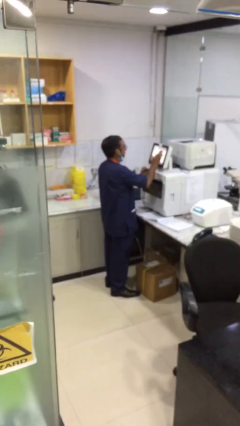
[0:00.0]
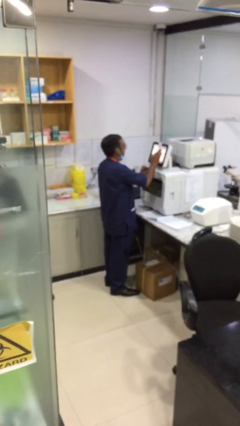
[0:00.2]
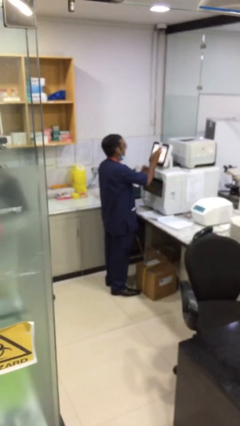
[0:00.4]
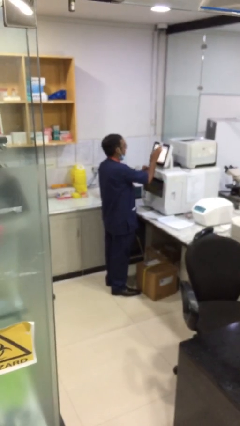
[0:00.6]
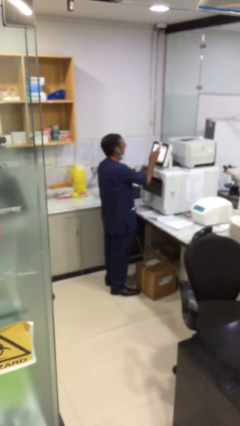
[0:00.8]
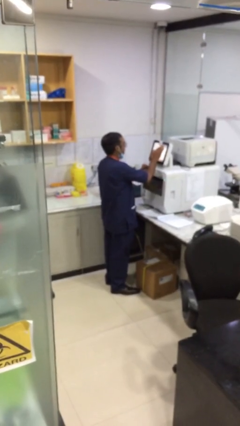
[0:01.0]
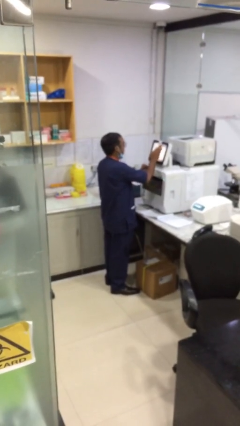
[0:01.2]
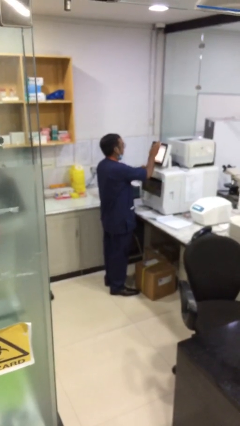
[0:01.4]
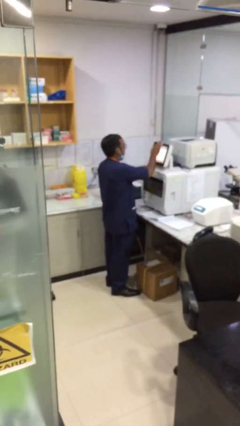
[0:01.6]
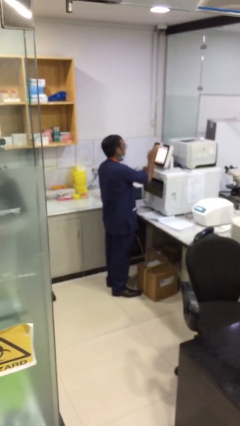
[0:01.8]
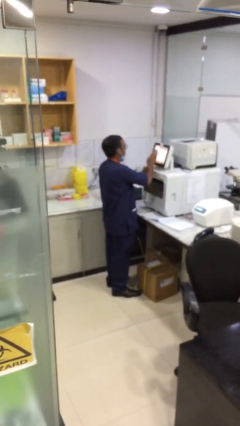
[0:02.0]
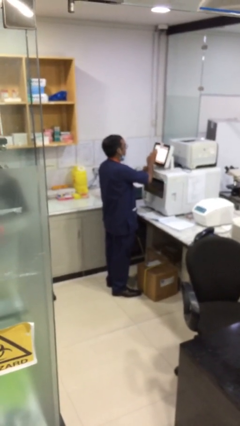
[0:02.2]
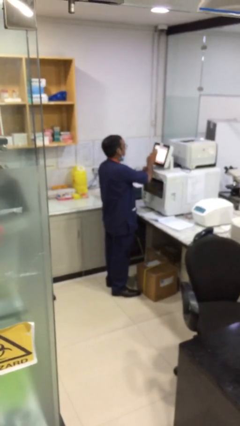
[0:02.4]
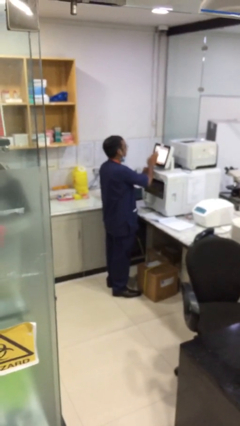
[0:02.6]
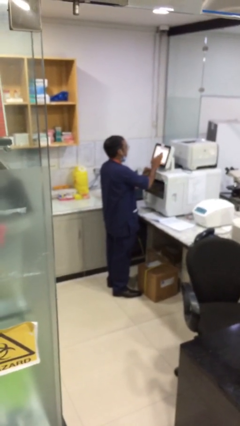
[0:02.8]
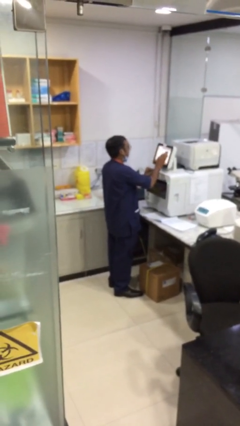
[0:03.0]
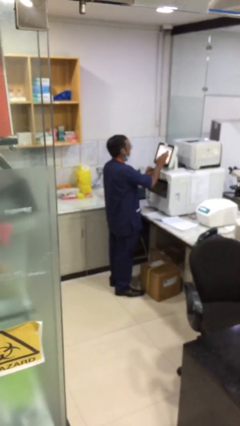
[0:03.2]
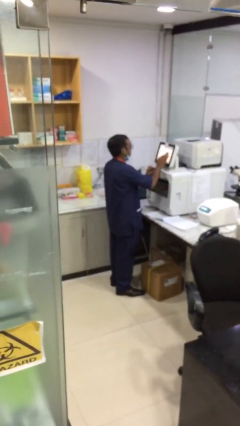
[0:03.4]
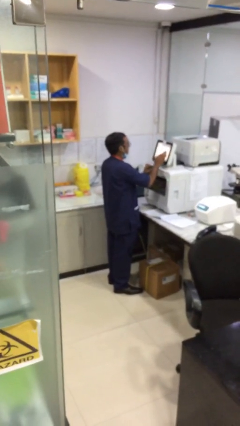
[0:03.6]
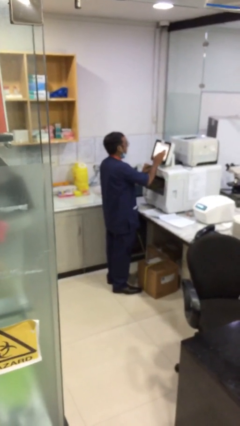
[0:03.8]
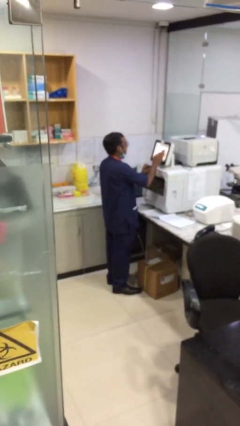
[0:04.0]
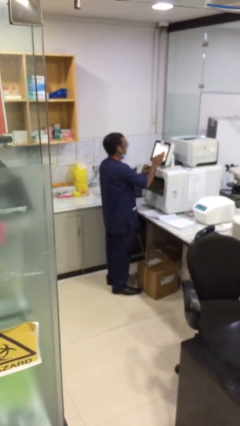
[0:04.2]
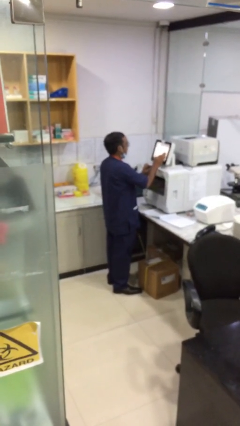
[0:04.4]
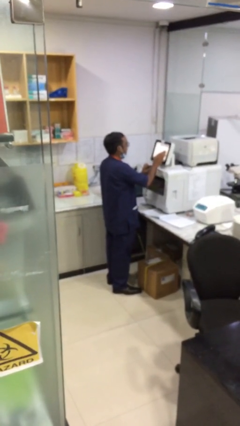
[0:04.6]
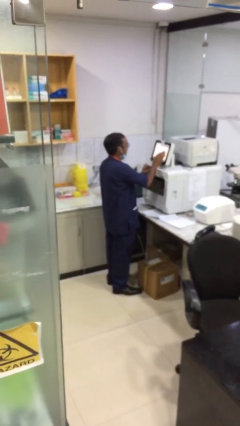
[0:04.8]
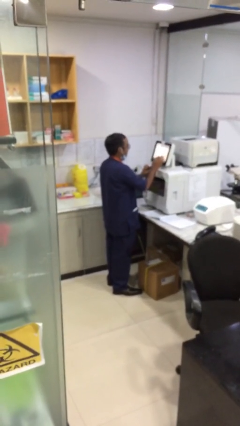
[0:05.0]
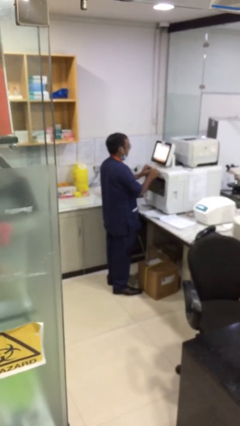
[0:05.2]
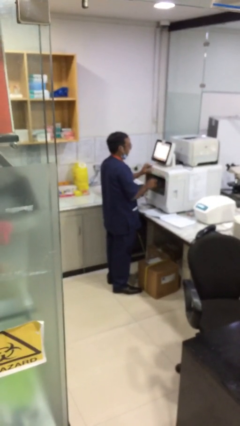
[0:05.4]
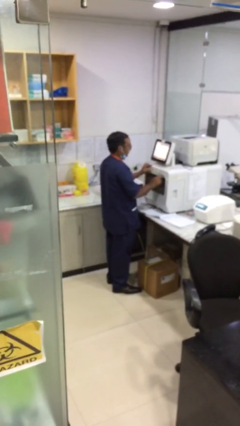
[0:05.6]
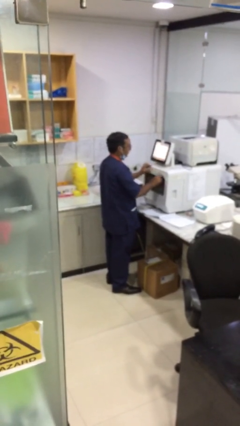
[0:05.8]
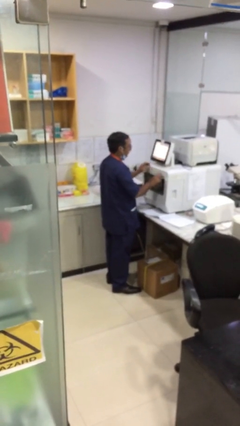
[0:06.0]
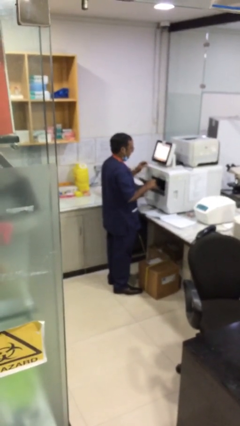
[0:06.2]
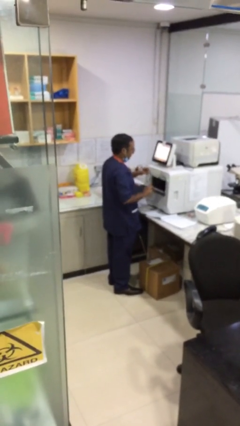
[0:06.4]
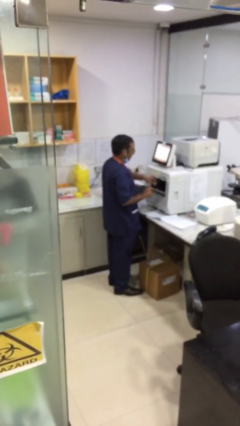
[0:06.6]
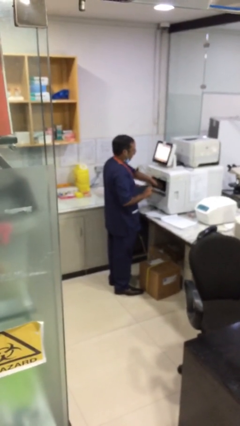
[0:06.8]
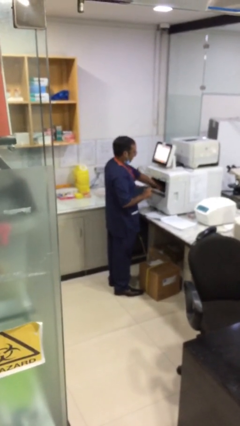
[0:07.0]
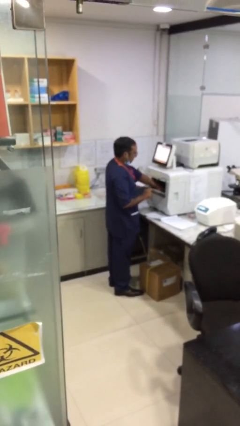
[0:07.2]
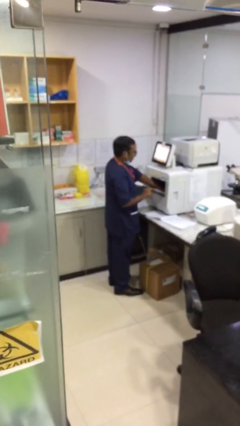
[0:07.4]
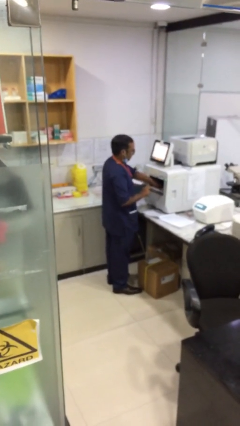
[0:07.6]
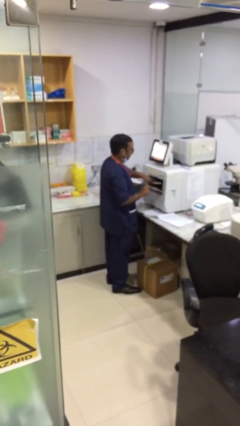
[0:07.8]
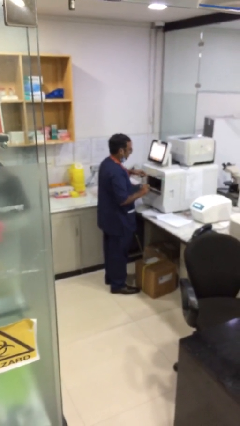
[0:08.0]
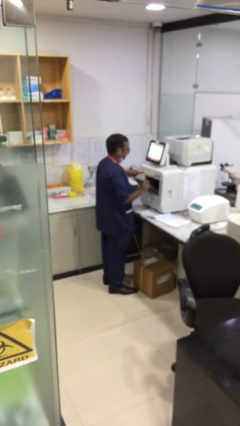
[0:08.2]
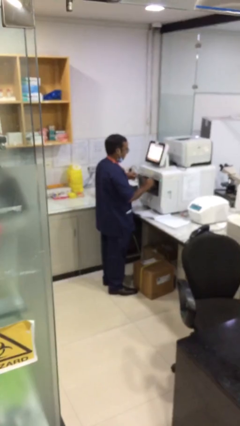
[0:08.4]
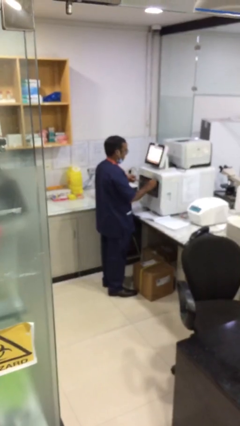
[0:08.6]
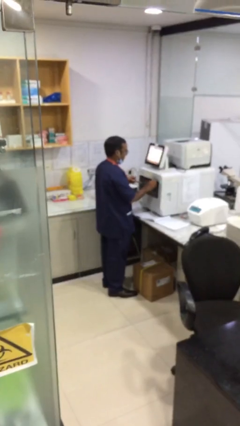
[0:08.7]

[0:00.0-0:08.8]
person purchases from machine

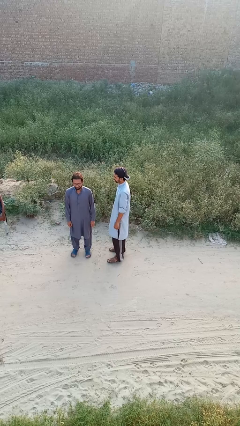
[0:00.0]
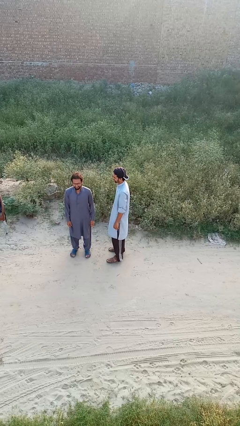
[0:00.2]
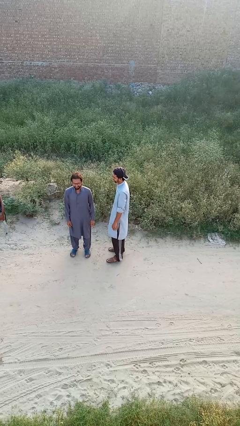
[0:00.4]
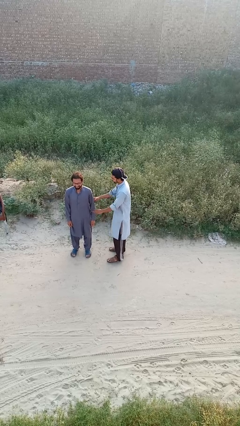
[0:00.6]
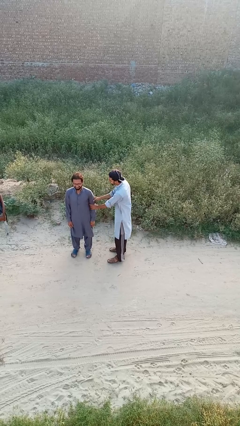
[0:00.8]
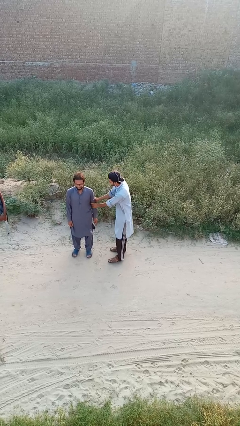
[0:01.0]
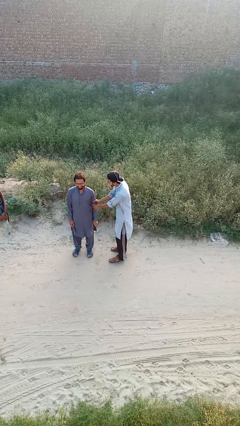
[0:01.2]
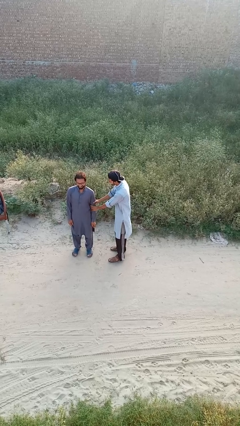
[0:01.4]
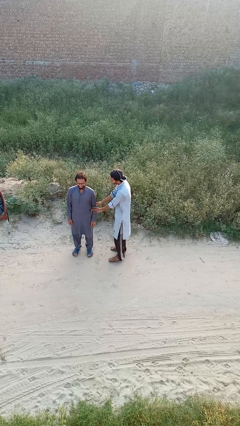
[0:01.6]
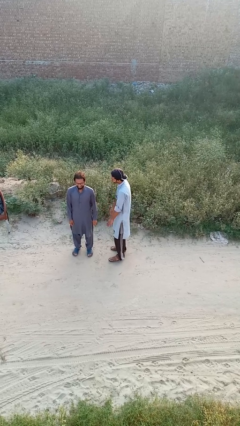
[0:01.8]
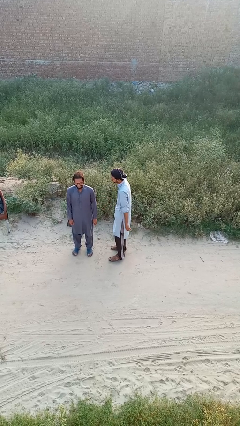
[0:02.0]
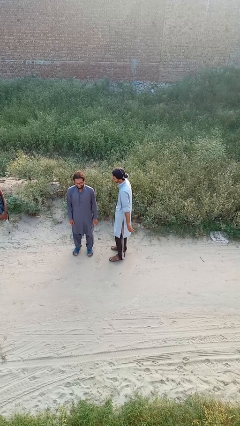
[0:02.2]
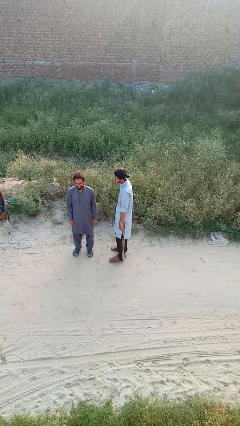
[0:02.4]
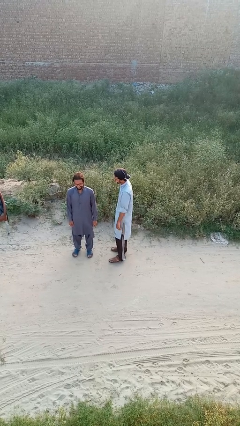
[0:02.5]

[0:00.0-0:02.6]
person grabs person by forearm

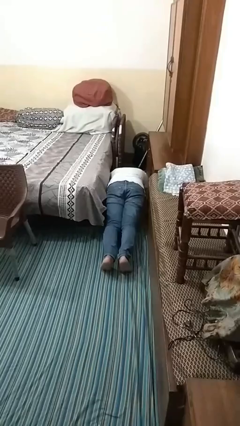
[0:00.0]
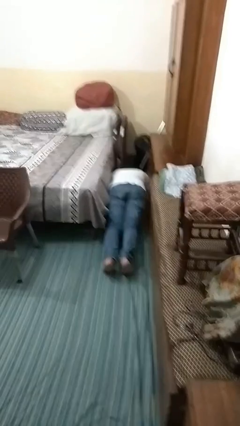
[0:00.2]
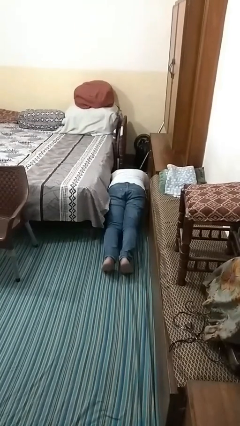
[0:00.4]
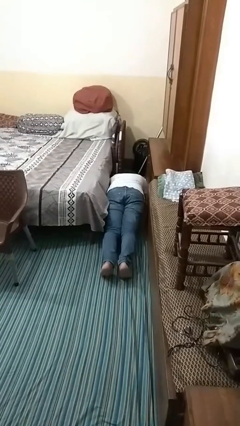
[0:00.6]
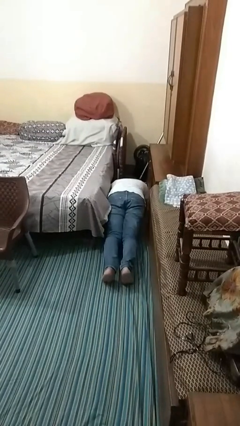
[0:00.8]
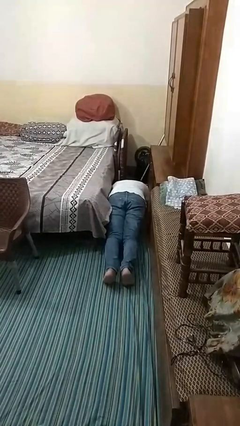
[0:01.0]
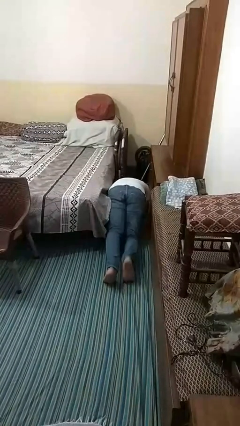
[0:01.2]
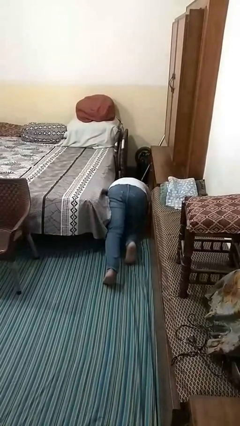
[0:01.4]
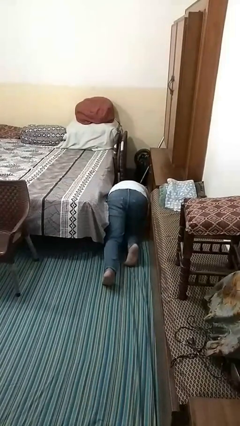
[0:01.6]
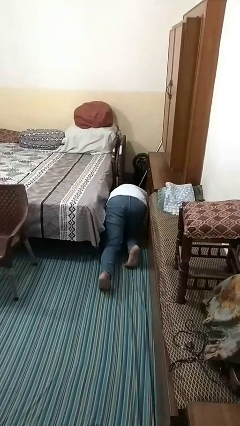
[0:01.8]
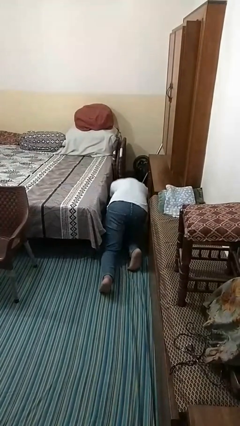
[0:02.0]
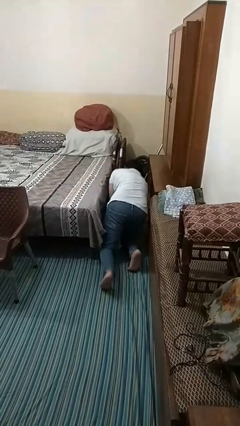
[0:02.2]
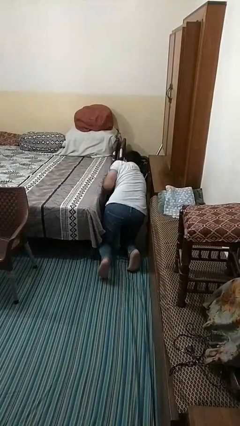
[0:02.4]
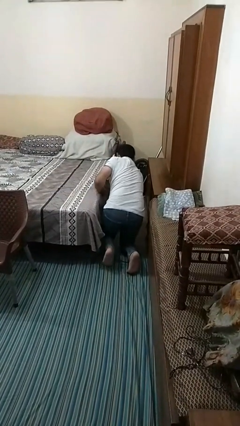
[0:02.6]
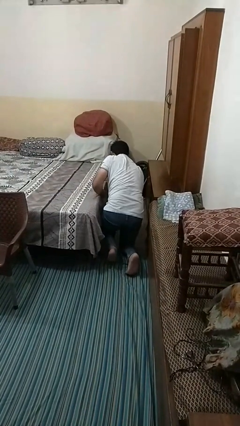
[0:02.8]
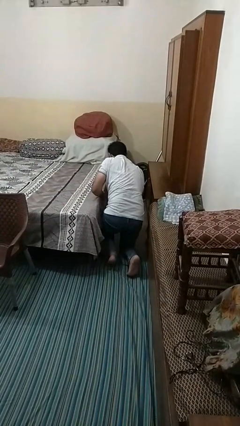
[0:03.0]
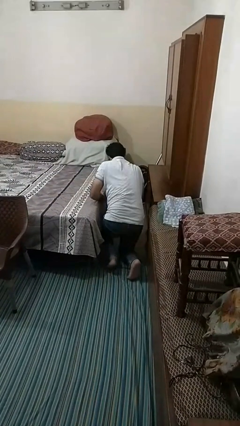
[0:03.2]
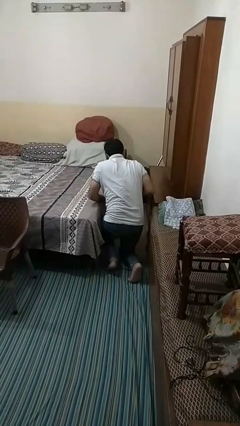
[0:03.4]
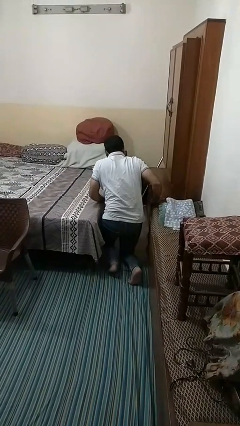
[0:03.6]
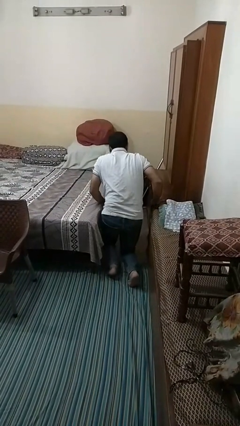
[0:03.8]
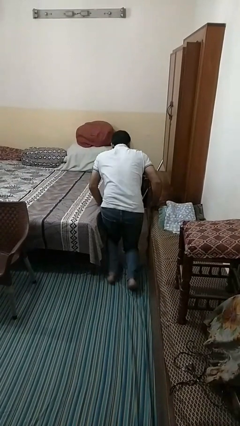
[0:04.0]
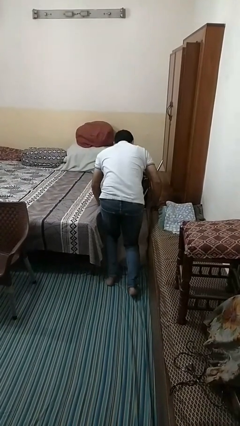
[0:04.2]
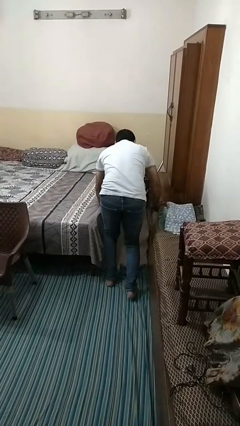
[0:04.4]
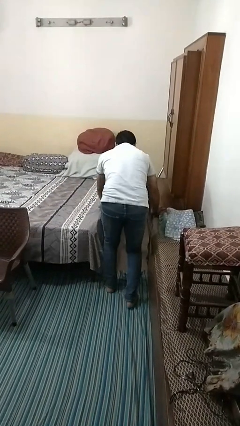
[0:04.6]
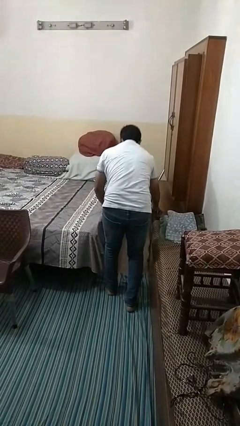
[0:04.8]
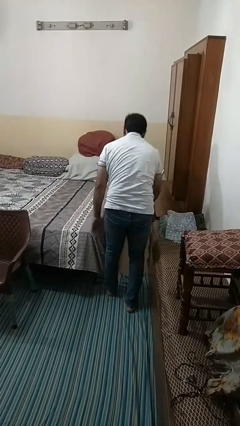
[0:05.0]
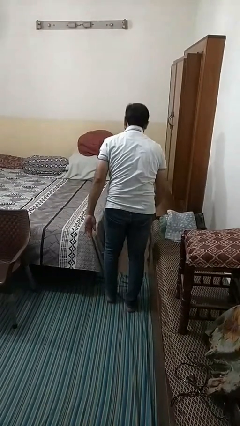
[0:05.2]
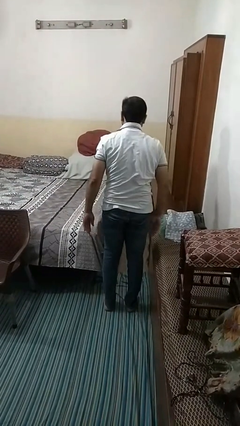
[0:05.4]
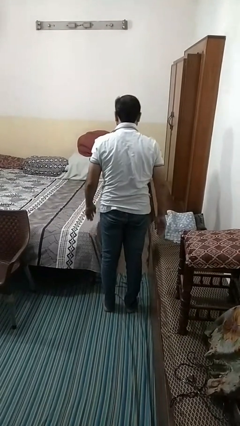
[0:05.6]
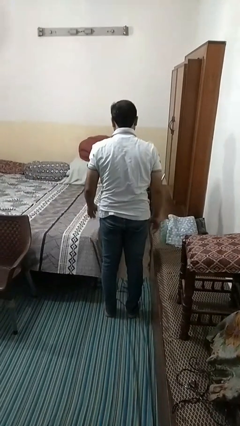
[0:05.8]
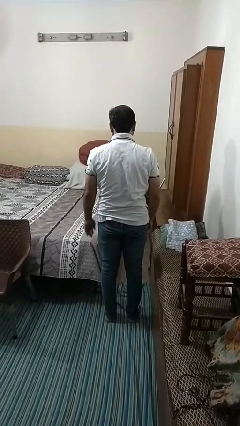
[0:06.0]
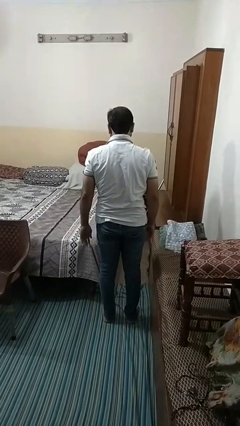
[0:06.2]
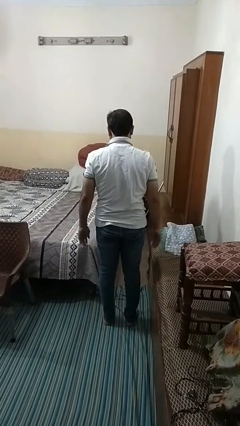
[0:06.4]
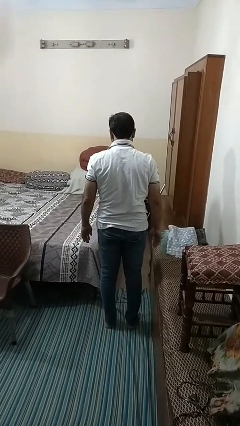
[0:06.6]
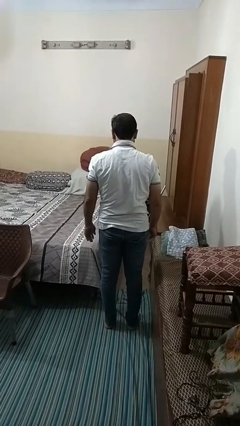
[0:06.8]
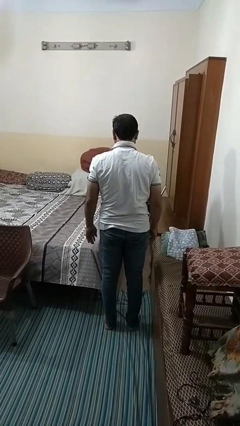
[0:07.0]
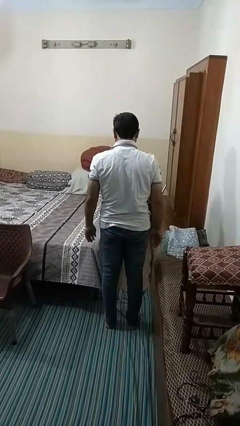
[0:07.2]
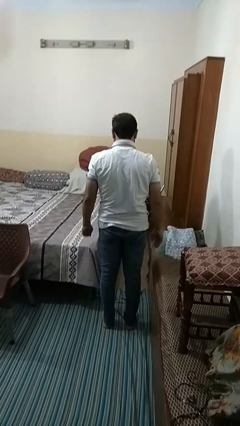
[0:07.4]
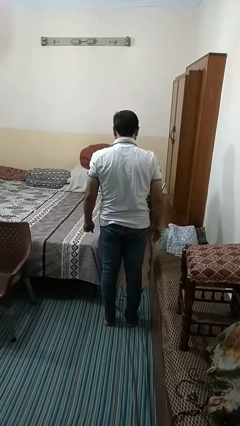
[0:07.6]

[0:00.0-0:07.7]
person stands up from floor
